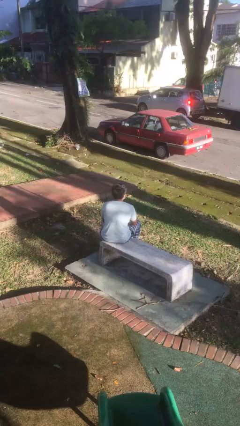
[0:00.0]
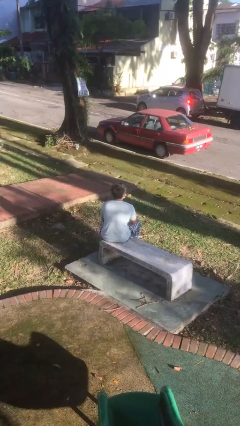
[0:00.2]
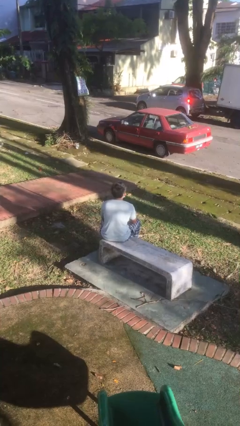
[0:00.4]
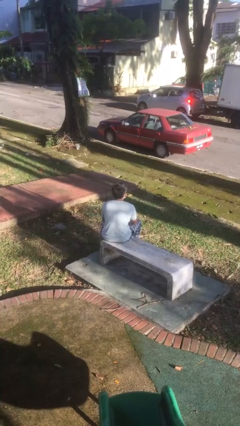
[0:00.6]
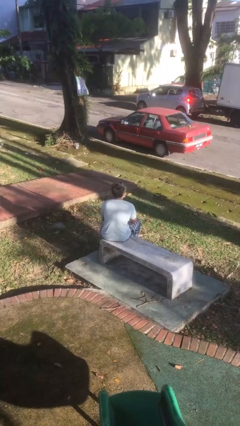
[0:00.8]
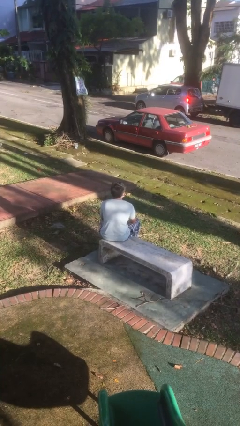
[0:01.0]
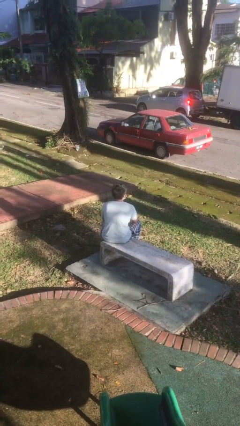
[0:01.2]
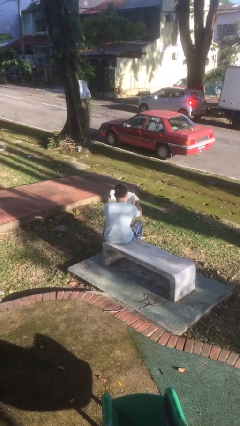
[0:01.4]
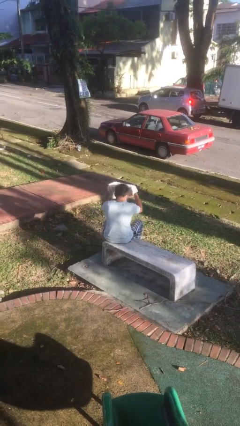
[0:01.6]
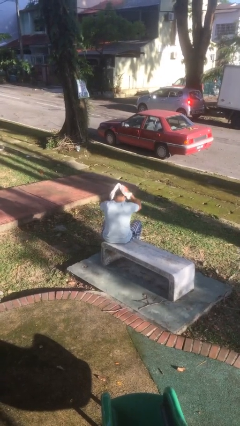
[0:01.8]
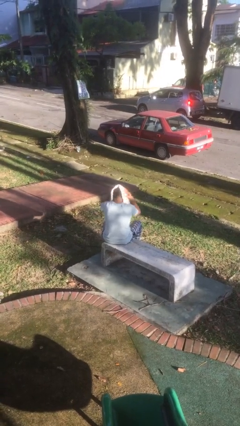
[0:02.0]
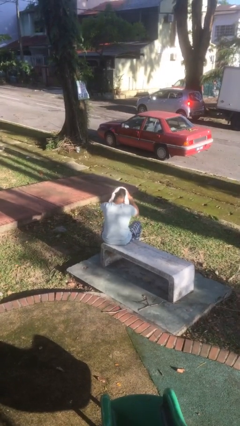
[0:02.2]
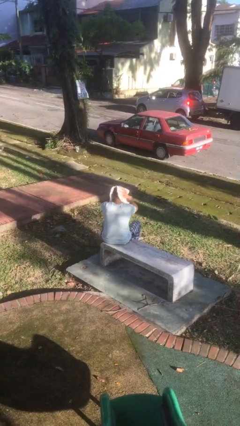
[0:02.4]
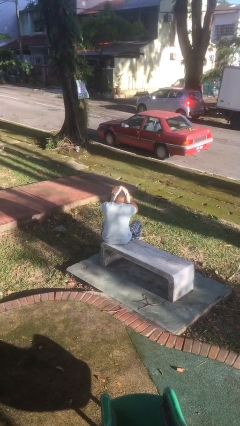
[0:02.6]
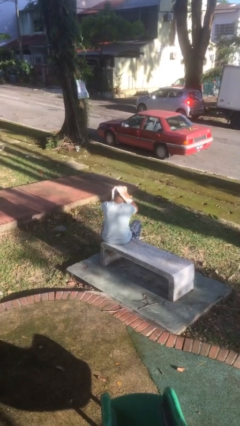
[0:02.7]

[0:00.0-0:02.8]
person dries hair with towel

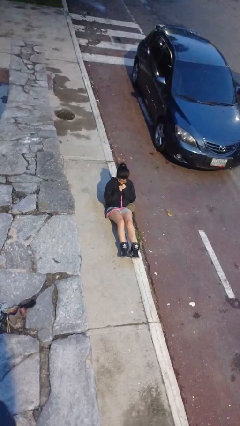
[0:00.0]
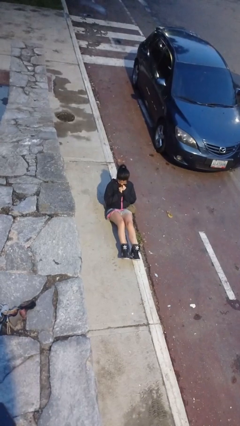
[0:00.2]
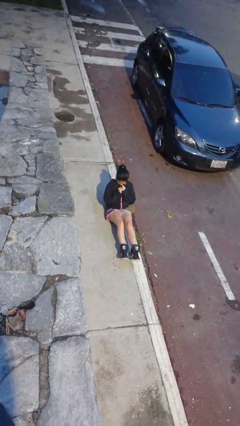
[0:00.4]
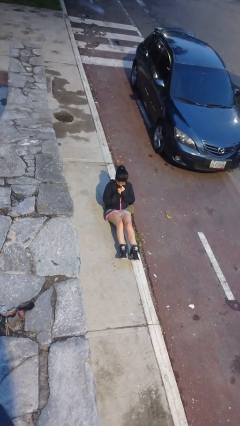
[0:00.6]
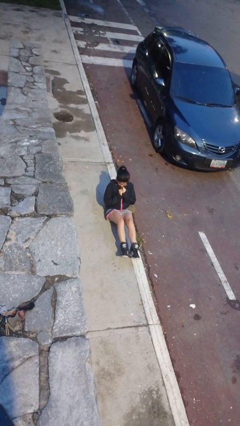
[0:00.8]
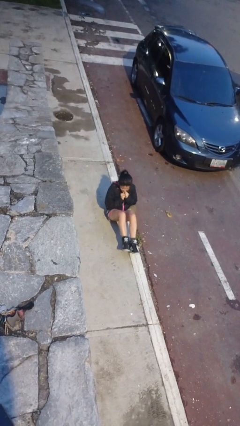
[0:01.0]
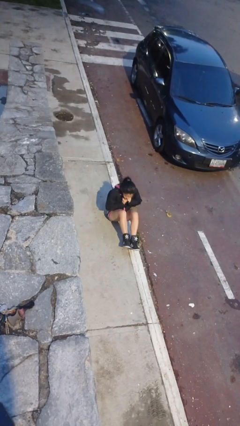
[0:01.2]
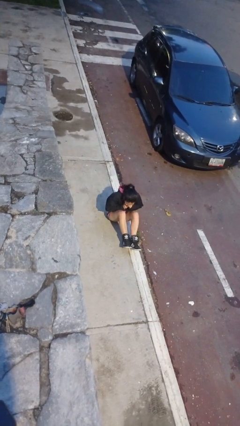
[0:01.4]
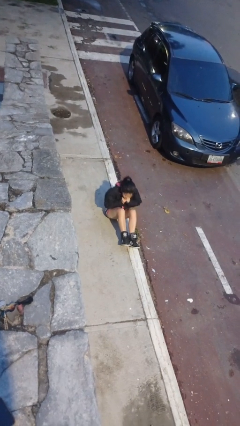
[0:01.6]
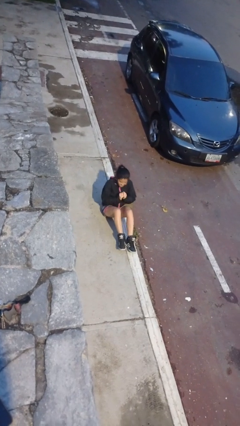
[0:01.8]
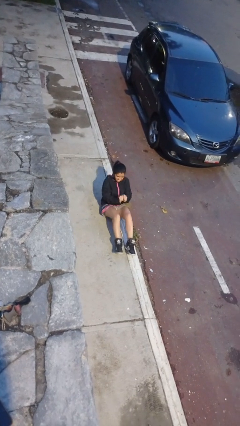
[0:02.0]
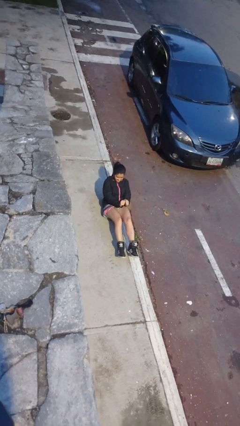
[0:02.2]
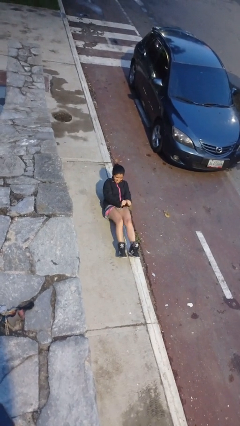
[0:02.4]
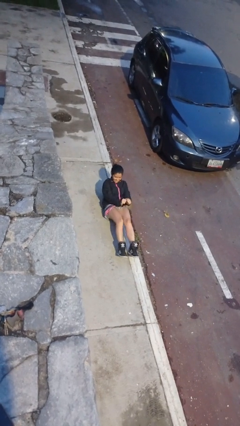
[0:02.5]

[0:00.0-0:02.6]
person exercises with situp

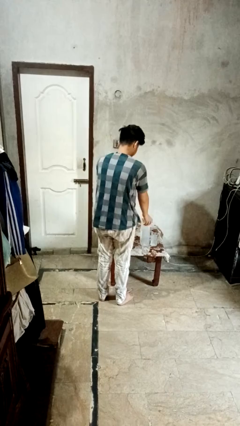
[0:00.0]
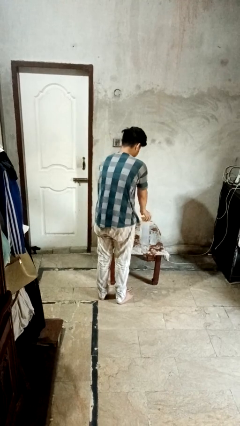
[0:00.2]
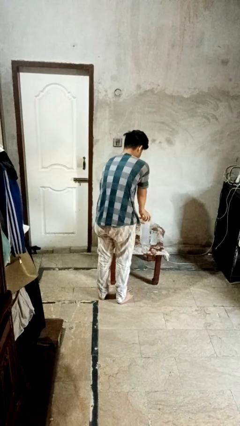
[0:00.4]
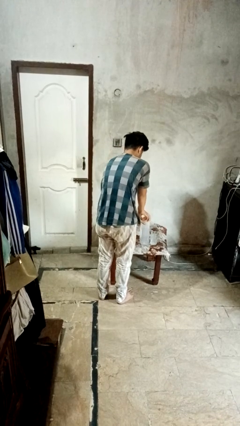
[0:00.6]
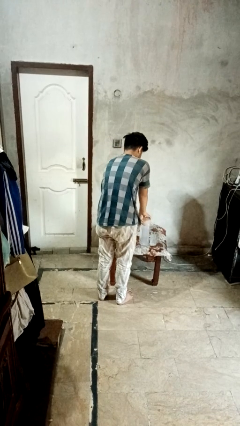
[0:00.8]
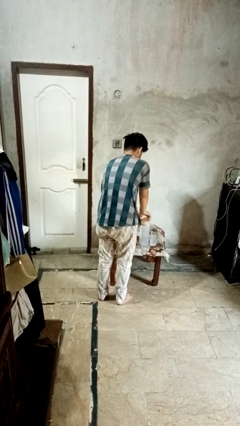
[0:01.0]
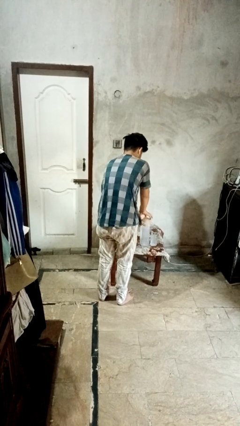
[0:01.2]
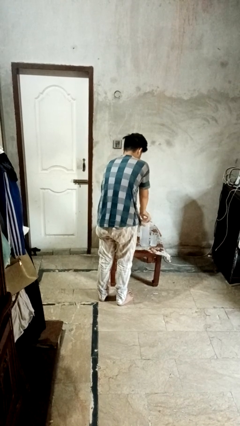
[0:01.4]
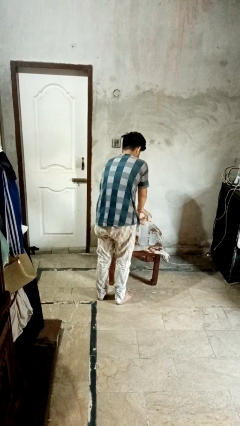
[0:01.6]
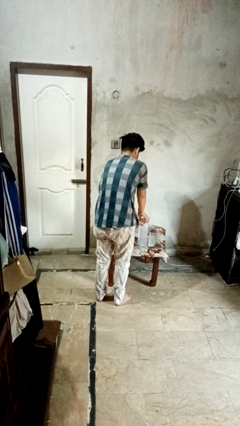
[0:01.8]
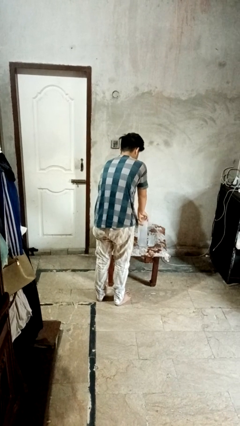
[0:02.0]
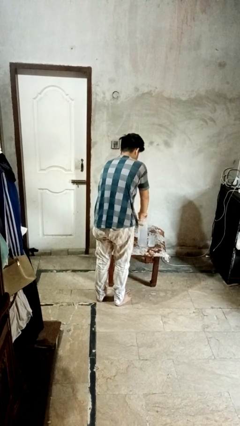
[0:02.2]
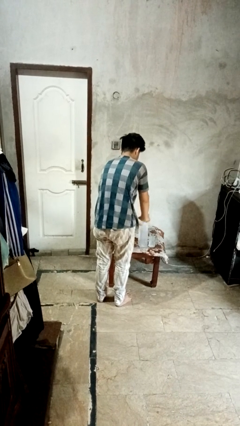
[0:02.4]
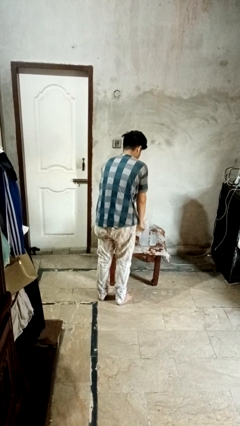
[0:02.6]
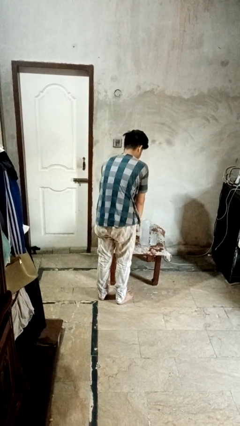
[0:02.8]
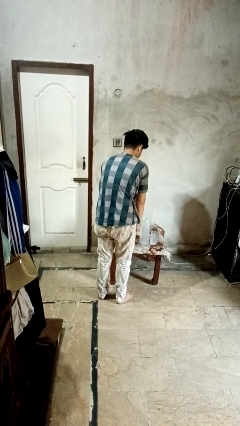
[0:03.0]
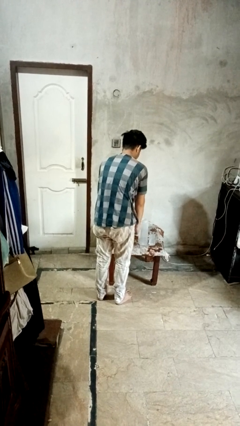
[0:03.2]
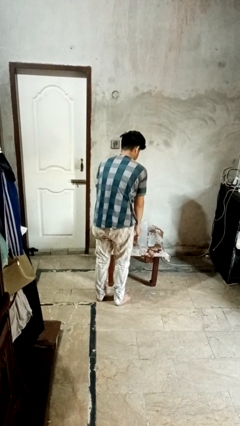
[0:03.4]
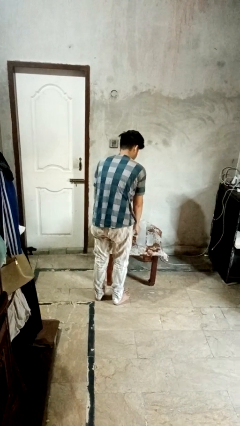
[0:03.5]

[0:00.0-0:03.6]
person unscrews lid from bottle

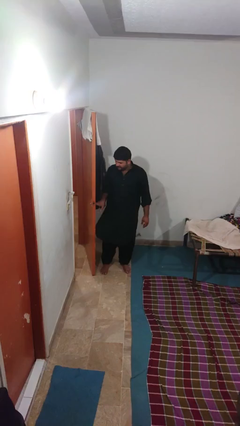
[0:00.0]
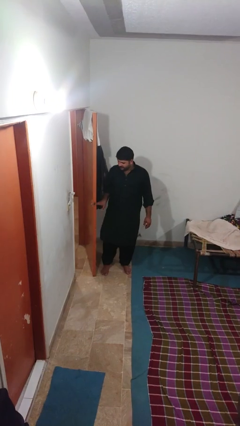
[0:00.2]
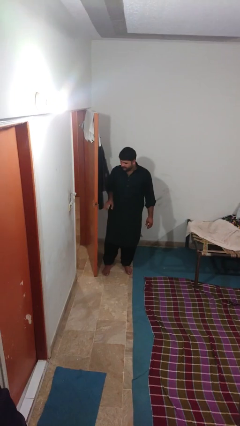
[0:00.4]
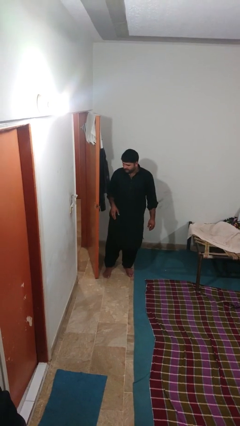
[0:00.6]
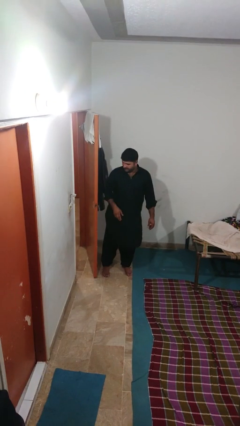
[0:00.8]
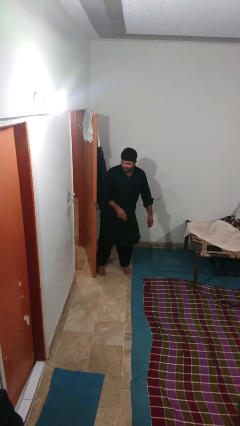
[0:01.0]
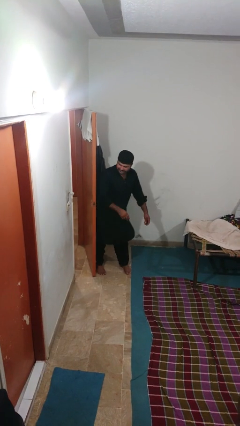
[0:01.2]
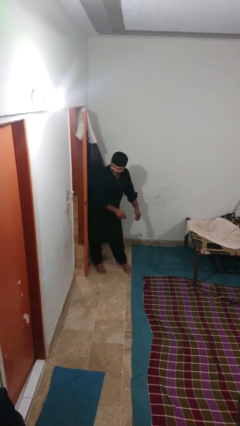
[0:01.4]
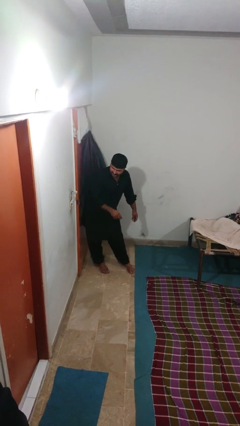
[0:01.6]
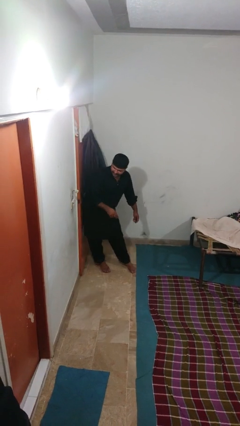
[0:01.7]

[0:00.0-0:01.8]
person closes door with hip

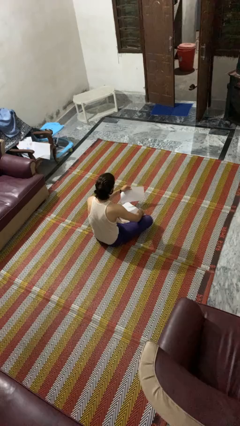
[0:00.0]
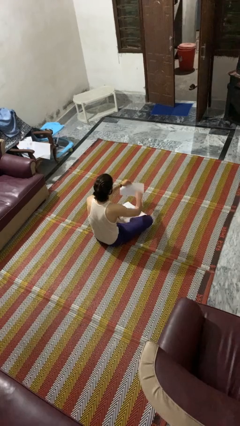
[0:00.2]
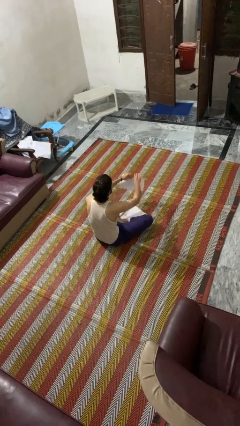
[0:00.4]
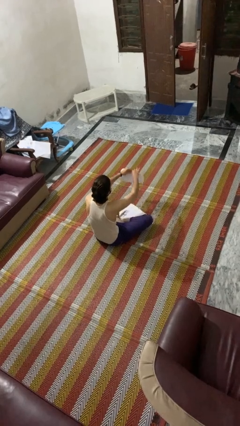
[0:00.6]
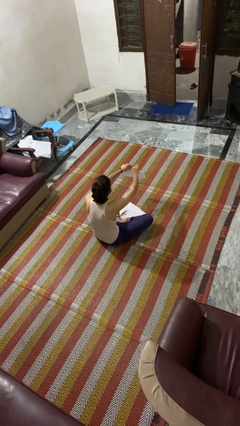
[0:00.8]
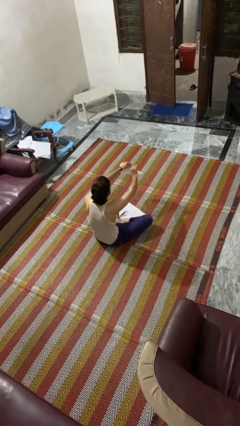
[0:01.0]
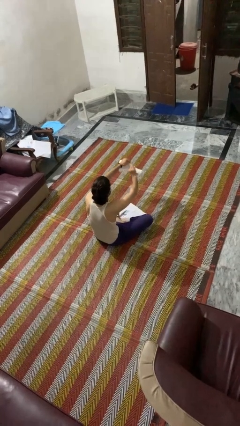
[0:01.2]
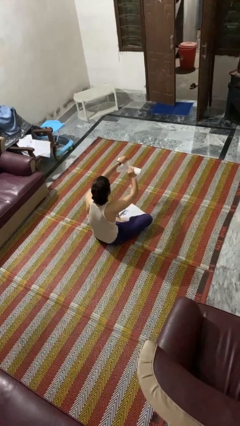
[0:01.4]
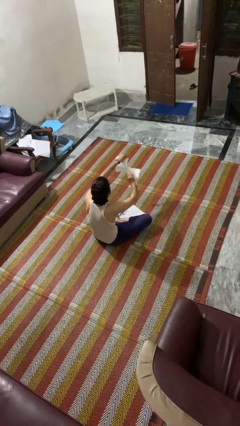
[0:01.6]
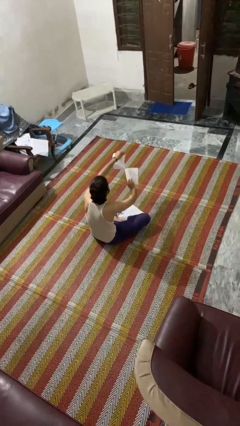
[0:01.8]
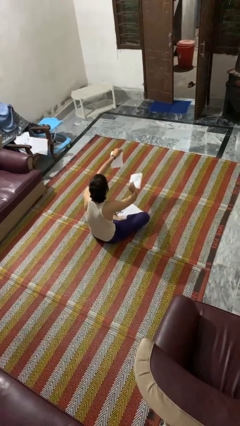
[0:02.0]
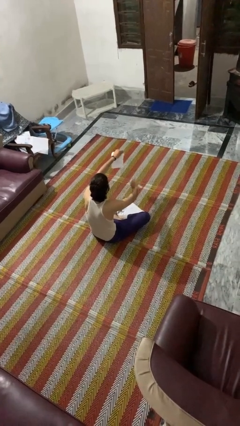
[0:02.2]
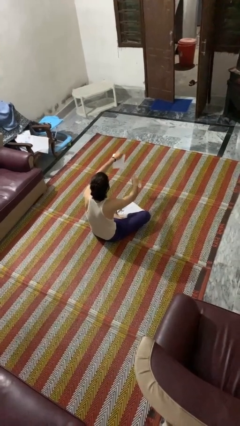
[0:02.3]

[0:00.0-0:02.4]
person tears paper

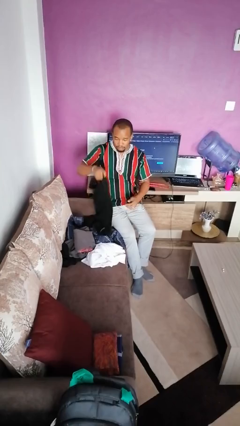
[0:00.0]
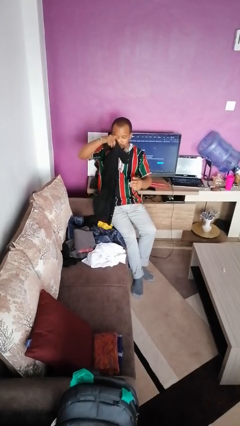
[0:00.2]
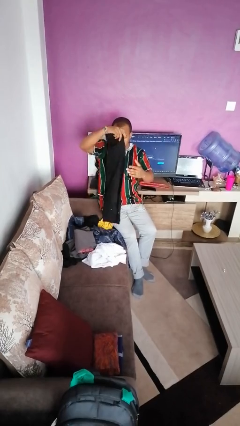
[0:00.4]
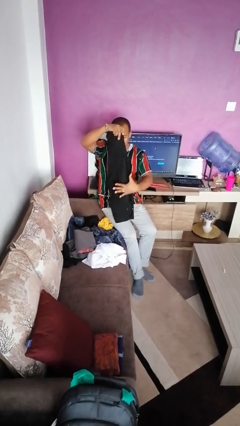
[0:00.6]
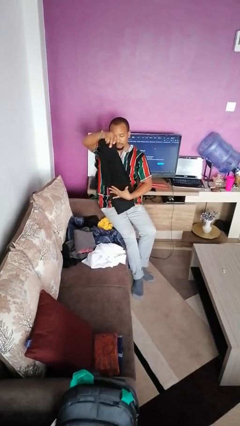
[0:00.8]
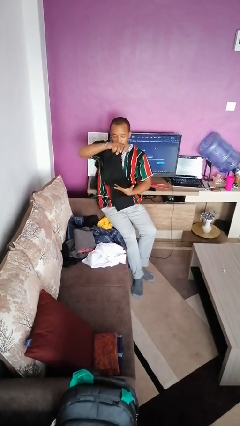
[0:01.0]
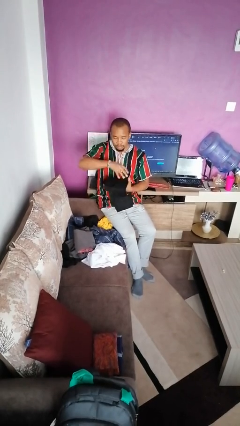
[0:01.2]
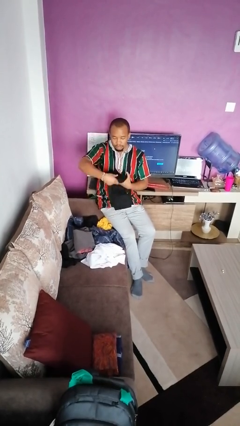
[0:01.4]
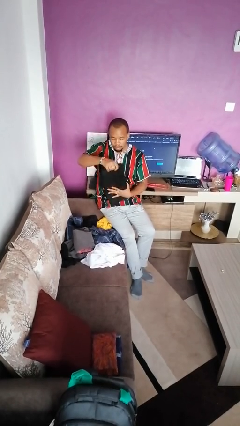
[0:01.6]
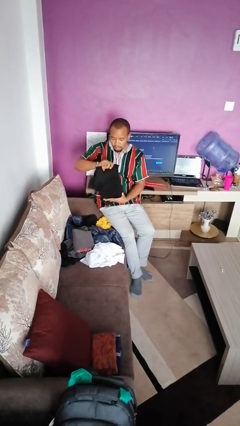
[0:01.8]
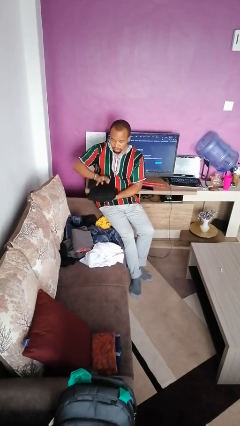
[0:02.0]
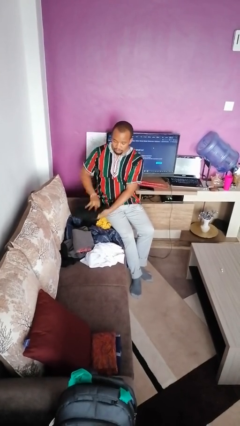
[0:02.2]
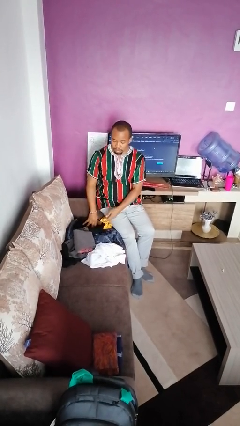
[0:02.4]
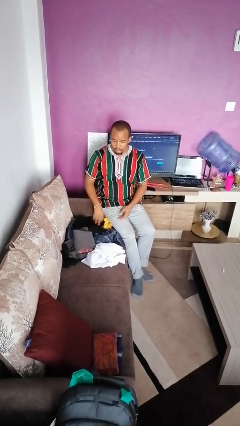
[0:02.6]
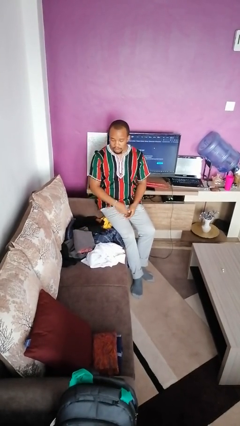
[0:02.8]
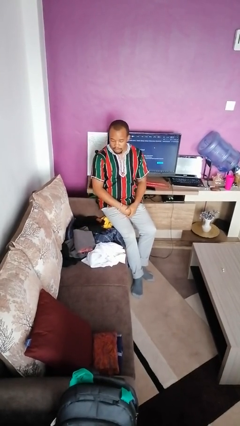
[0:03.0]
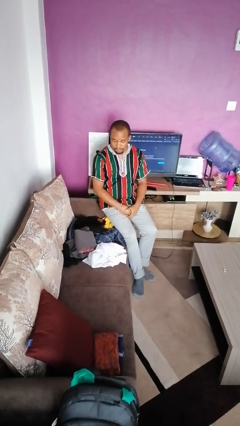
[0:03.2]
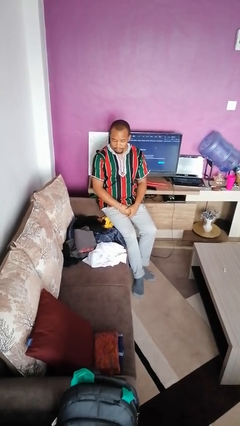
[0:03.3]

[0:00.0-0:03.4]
person folds pants

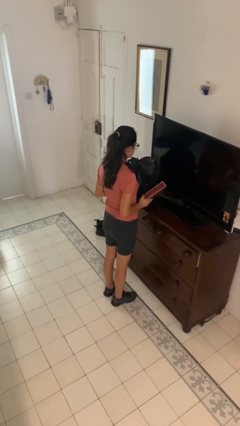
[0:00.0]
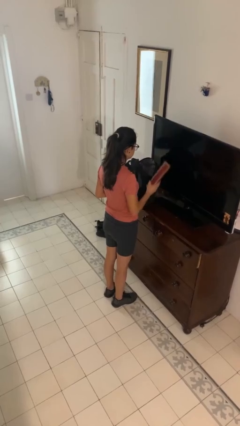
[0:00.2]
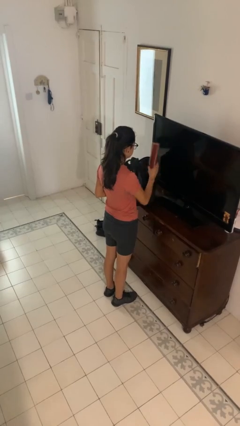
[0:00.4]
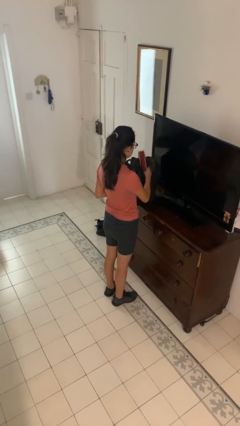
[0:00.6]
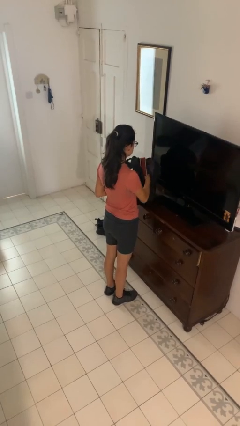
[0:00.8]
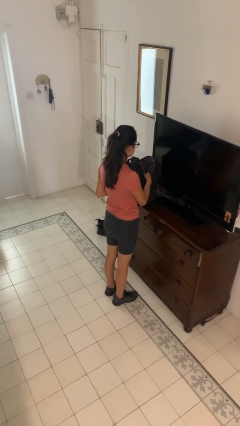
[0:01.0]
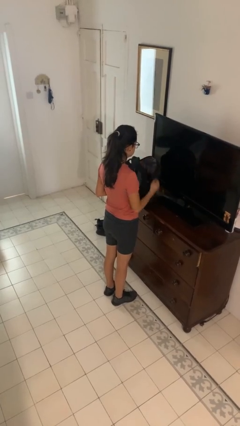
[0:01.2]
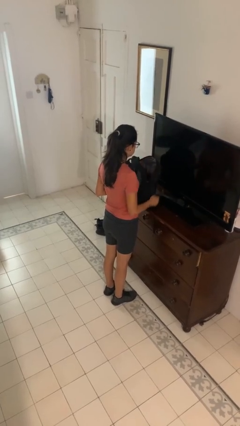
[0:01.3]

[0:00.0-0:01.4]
person puts object into bag
